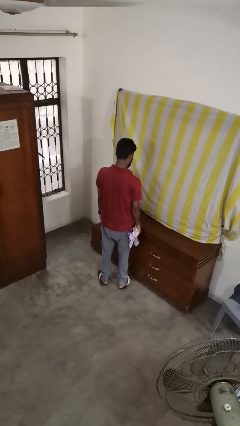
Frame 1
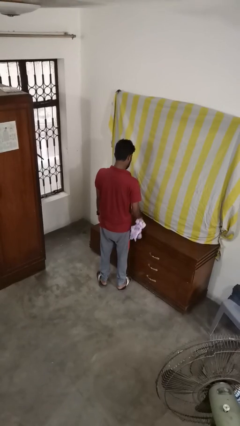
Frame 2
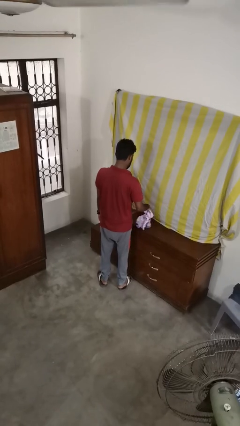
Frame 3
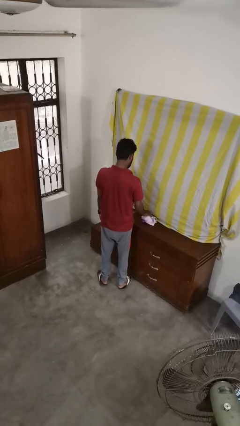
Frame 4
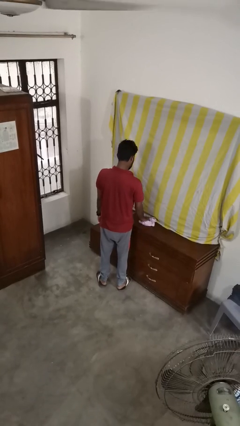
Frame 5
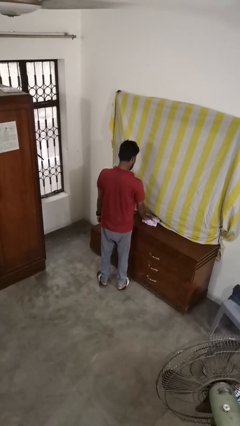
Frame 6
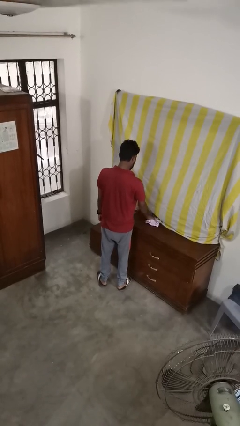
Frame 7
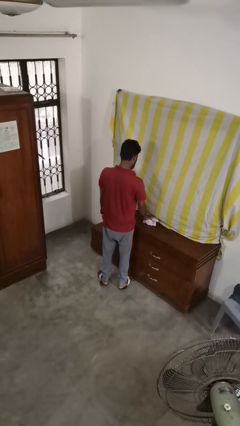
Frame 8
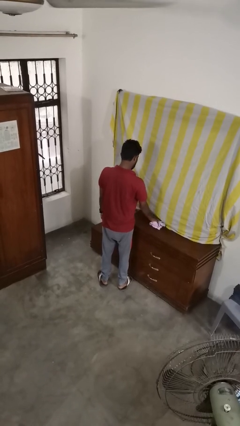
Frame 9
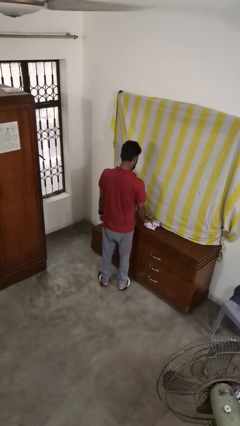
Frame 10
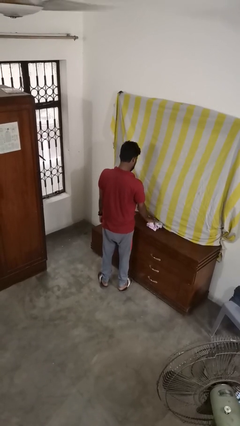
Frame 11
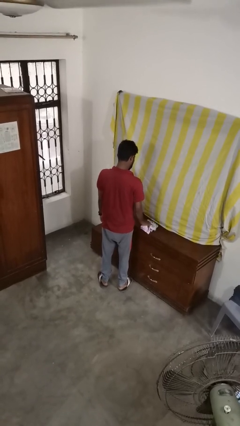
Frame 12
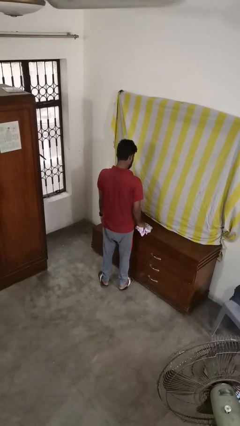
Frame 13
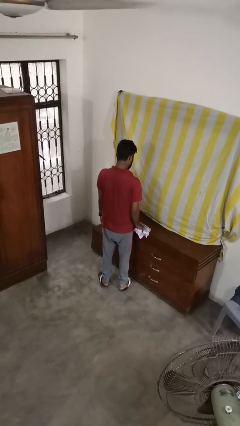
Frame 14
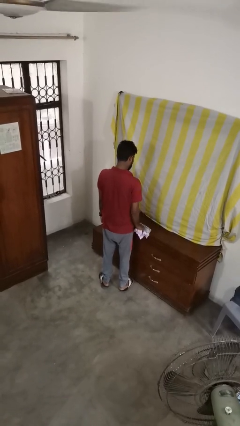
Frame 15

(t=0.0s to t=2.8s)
person cleans table with rag

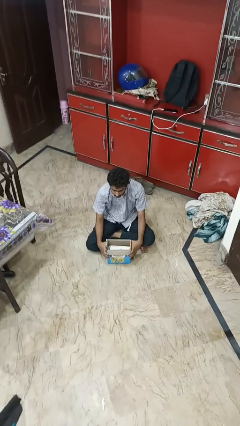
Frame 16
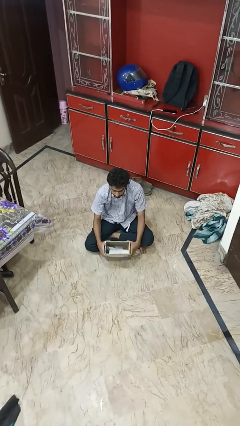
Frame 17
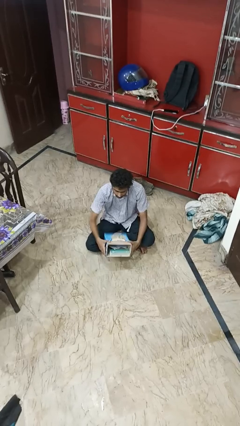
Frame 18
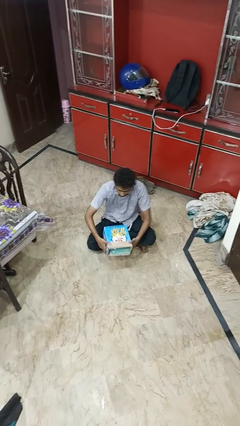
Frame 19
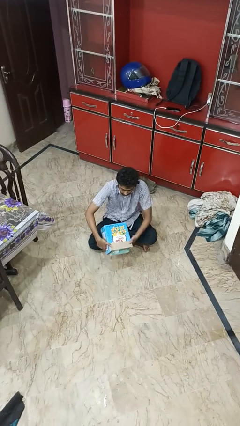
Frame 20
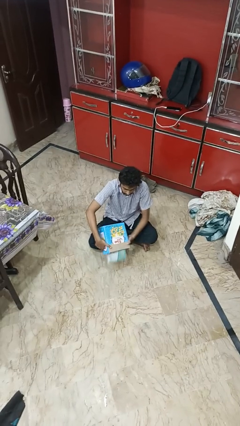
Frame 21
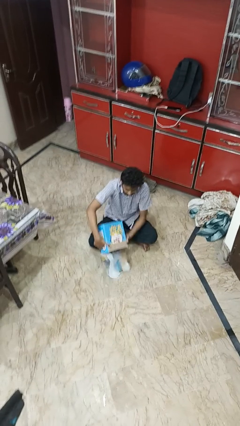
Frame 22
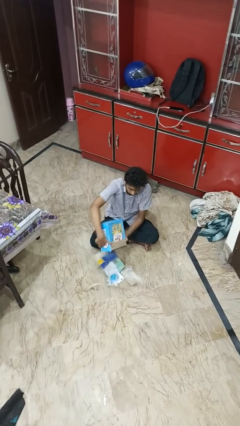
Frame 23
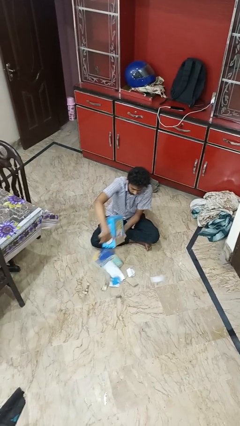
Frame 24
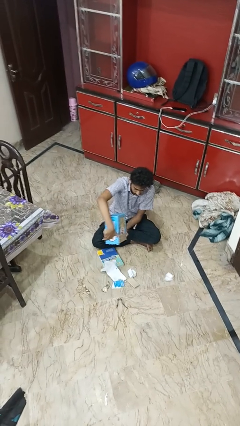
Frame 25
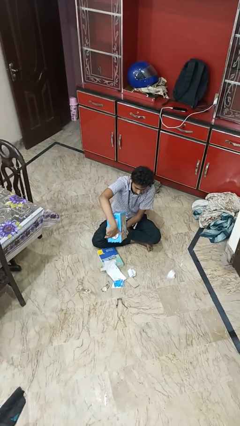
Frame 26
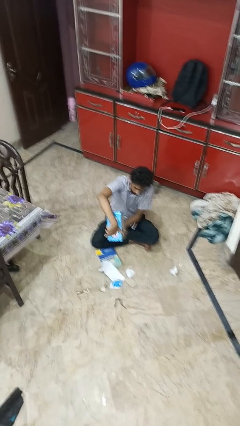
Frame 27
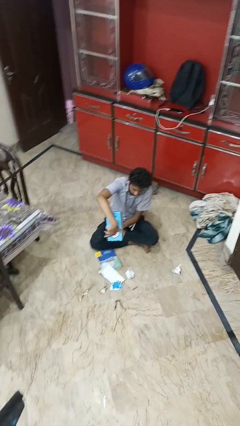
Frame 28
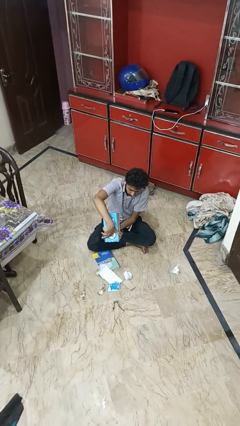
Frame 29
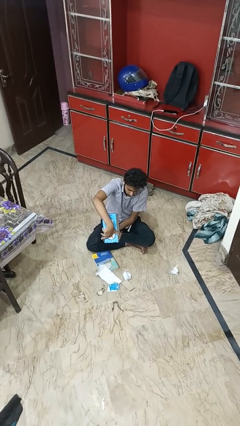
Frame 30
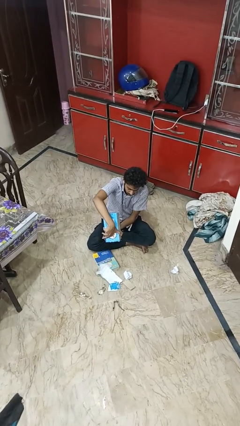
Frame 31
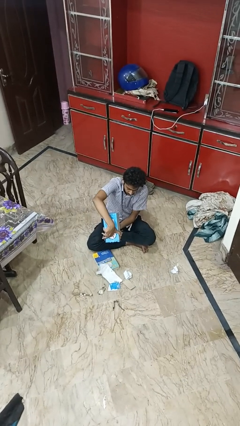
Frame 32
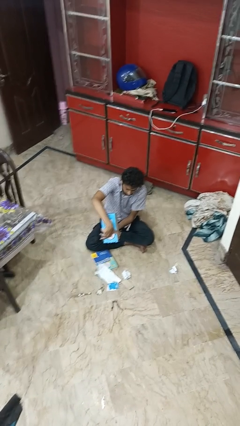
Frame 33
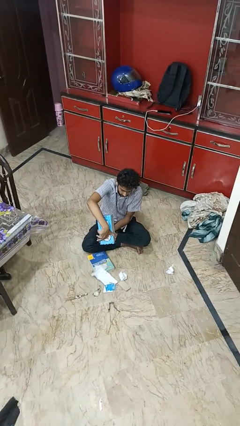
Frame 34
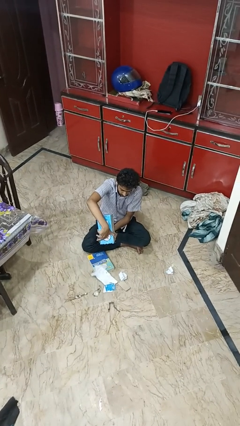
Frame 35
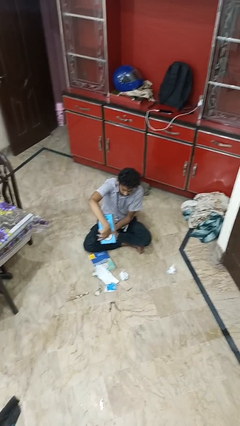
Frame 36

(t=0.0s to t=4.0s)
person unloads box onto floor

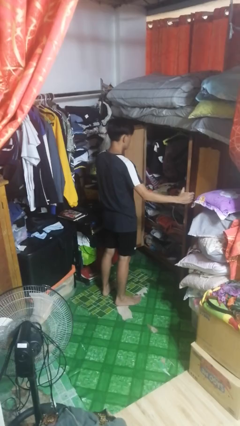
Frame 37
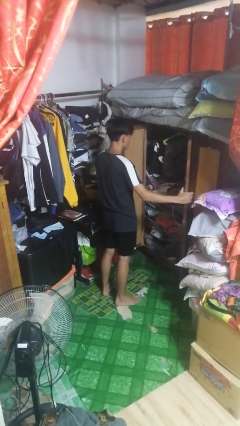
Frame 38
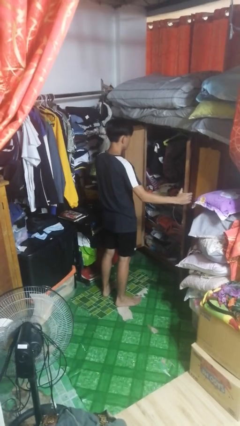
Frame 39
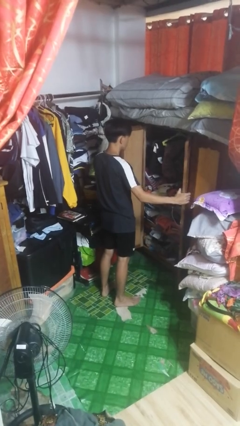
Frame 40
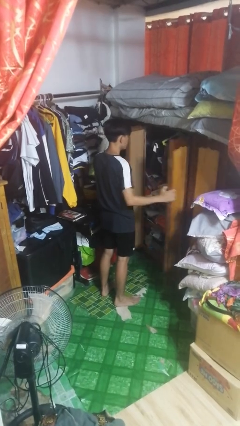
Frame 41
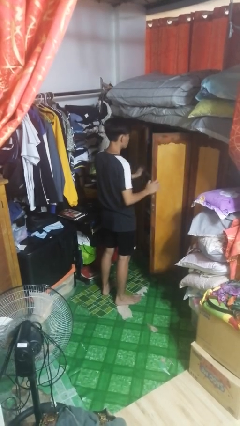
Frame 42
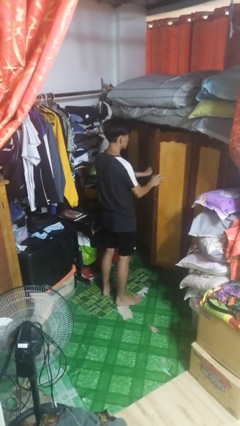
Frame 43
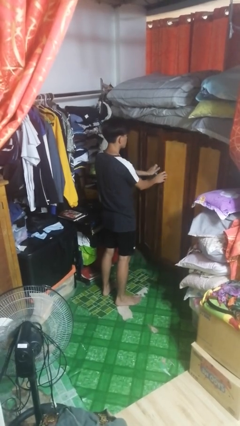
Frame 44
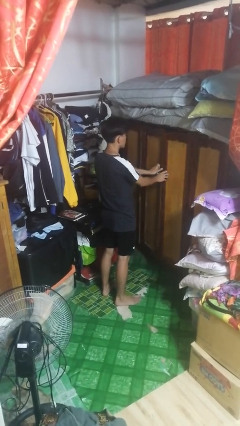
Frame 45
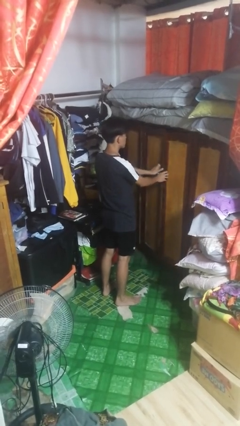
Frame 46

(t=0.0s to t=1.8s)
person closes dresser drawer

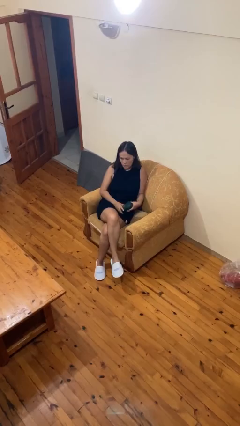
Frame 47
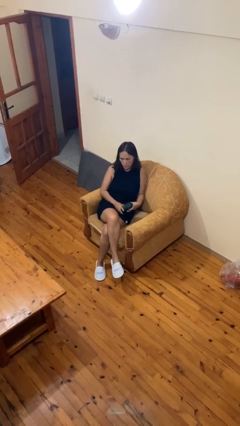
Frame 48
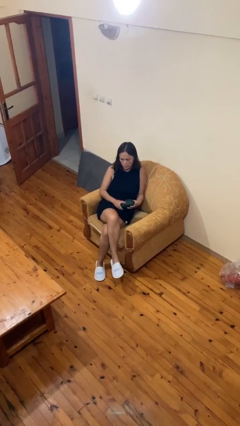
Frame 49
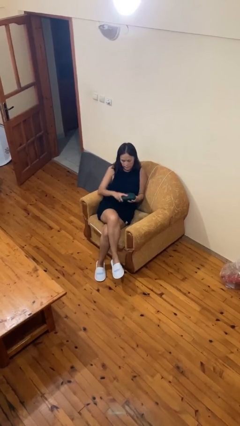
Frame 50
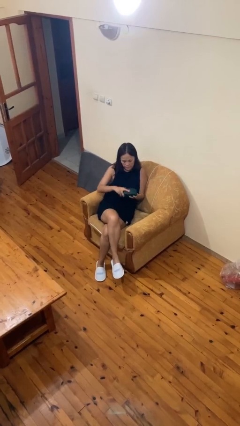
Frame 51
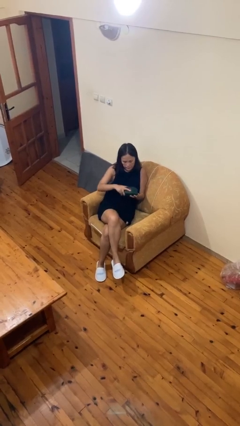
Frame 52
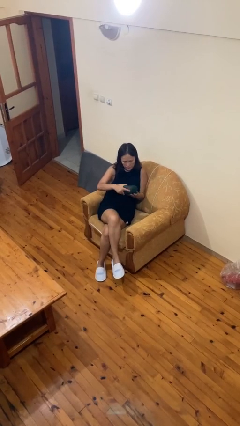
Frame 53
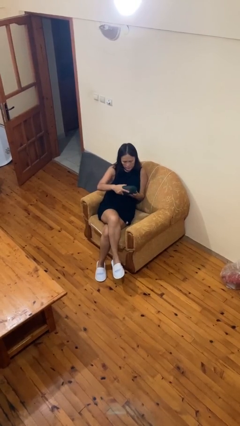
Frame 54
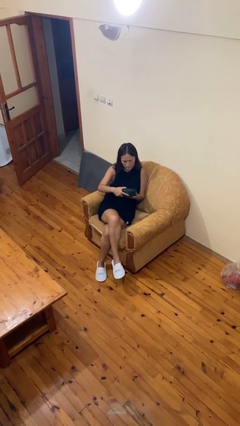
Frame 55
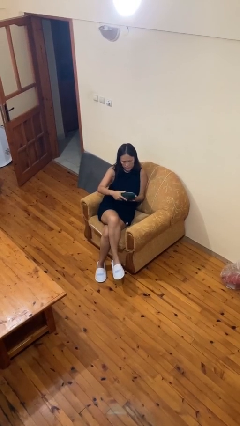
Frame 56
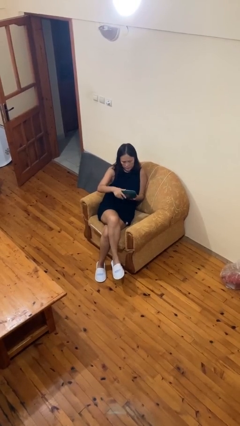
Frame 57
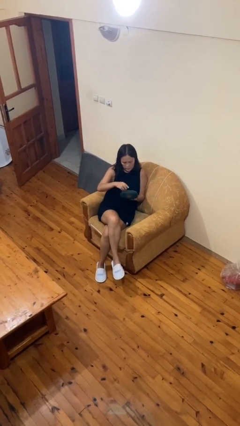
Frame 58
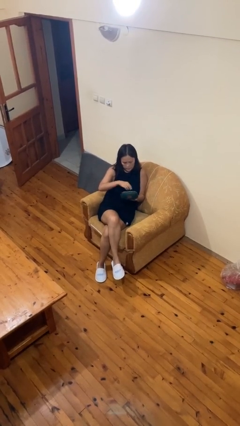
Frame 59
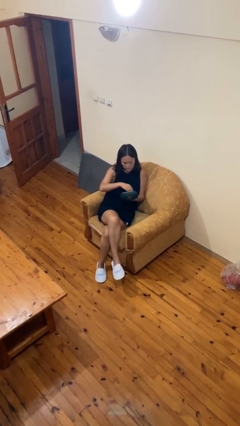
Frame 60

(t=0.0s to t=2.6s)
person opens jewelry box

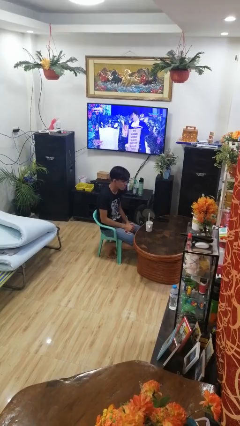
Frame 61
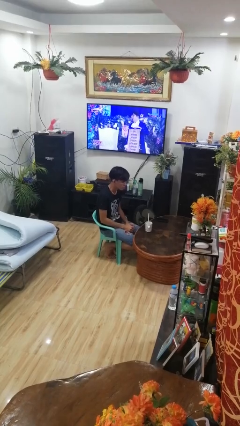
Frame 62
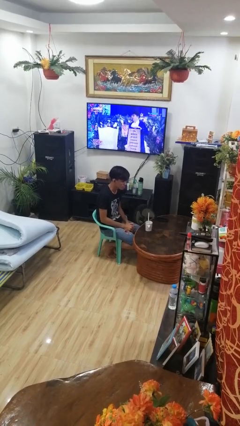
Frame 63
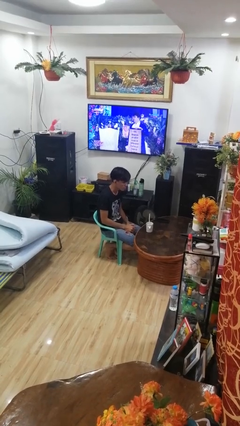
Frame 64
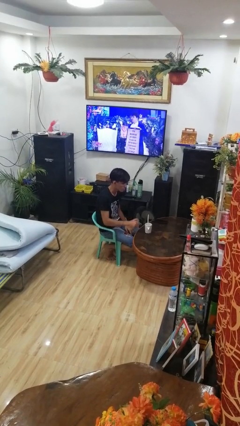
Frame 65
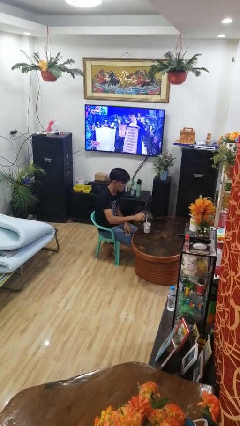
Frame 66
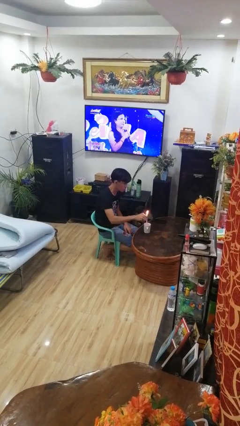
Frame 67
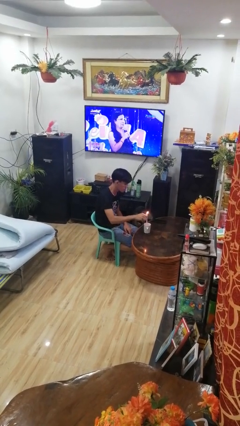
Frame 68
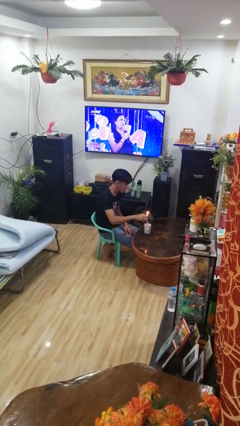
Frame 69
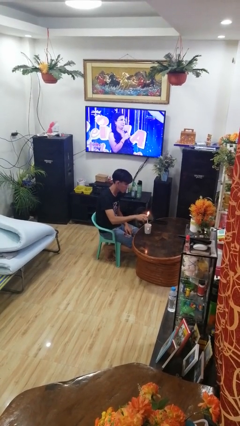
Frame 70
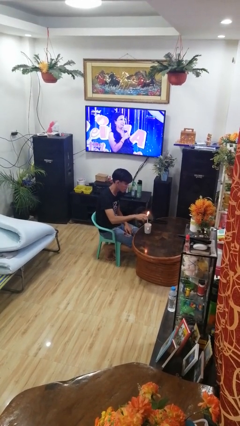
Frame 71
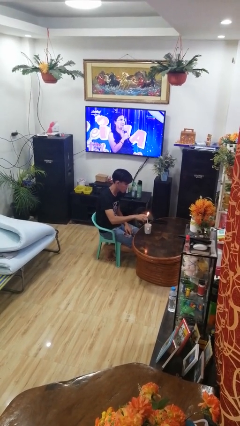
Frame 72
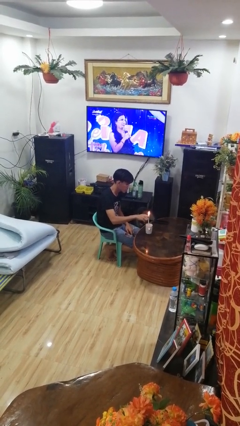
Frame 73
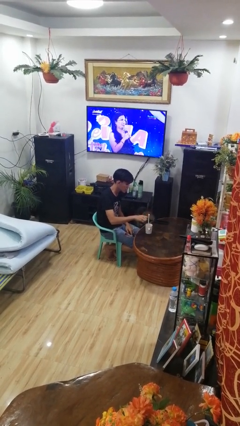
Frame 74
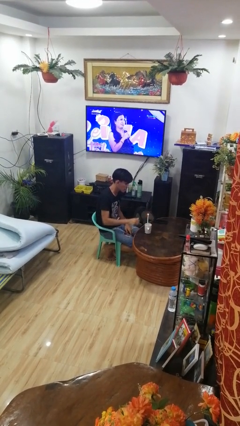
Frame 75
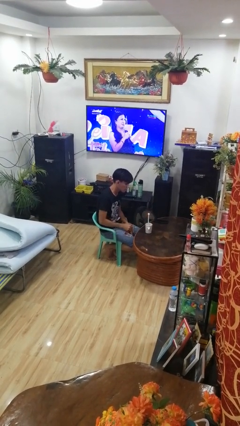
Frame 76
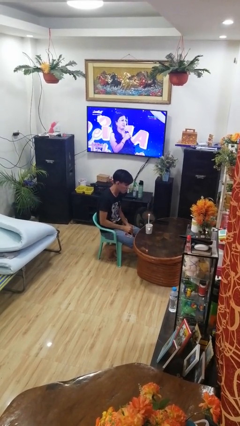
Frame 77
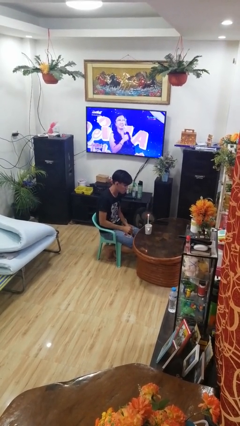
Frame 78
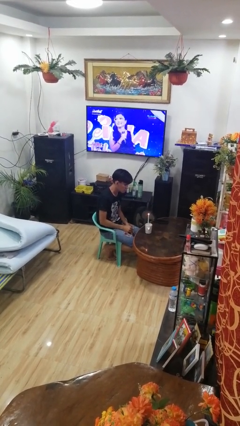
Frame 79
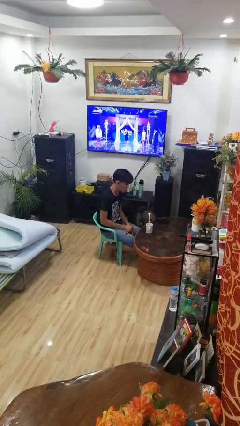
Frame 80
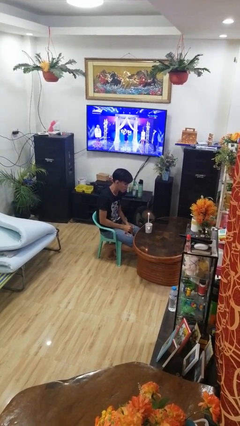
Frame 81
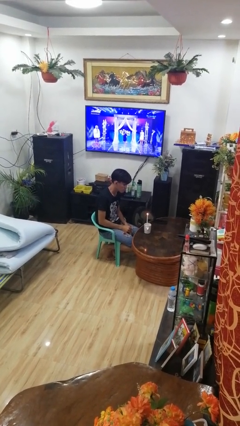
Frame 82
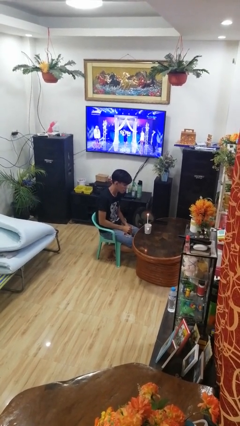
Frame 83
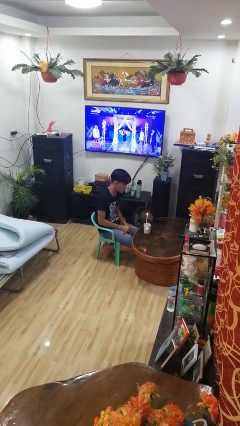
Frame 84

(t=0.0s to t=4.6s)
person lights candle

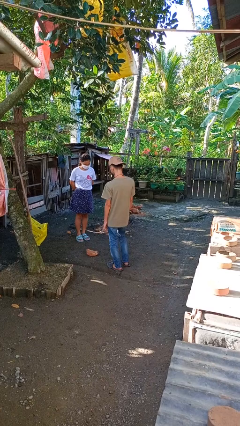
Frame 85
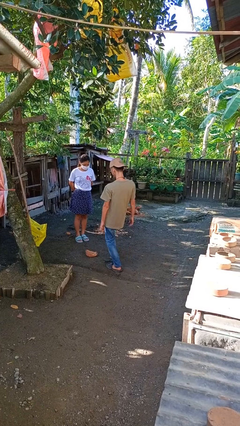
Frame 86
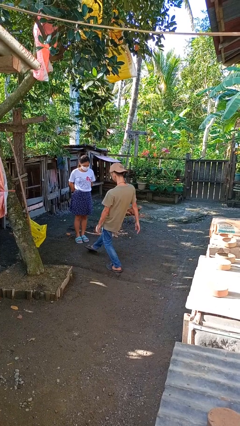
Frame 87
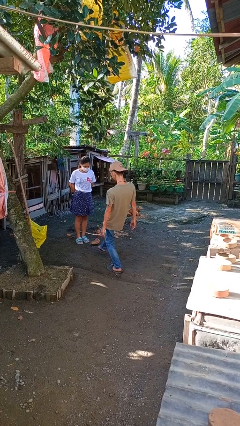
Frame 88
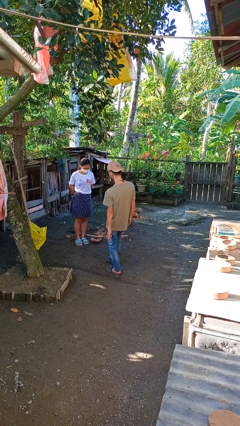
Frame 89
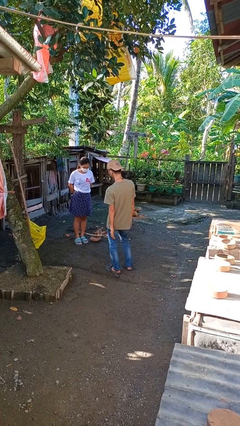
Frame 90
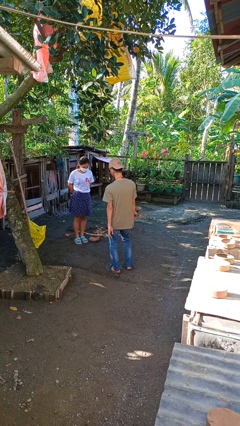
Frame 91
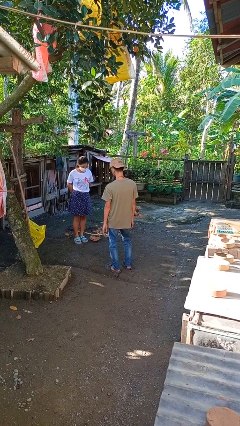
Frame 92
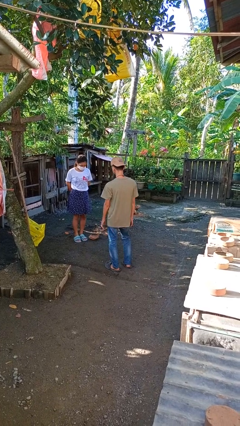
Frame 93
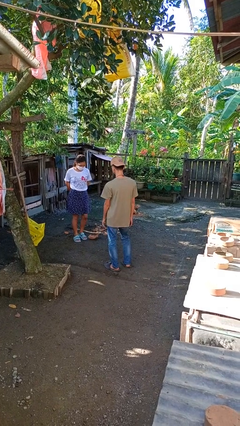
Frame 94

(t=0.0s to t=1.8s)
person kicks object to person
